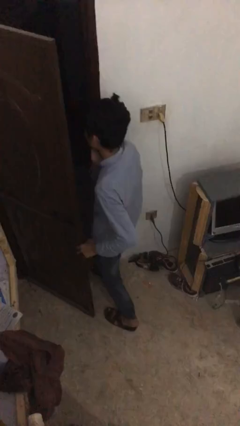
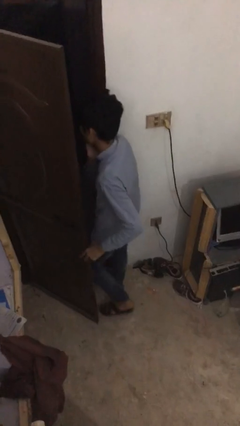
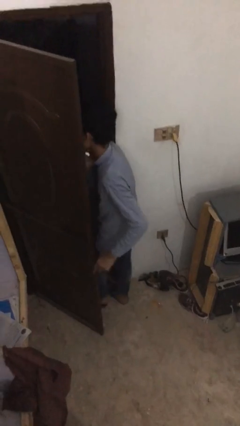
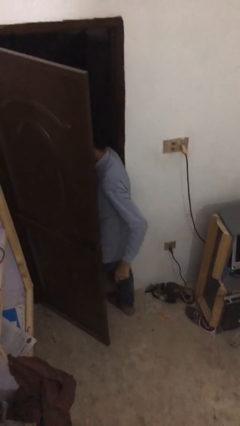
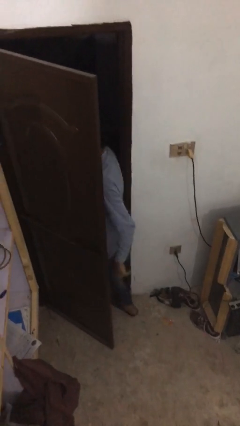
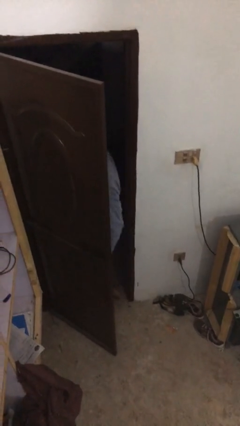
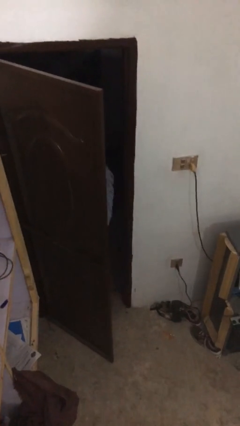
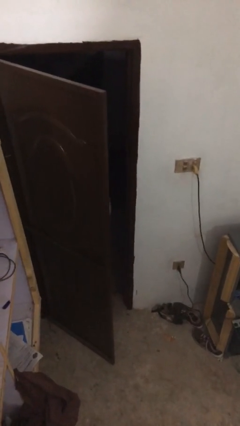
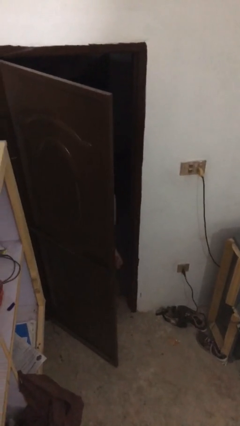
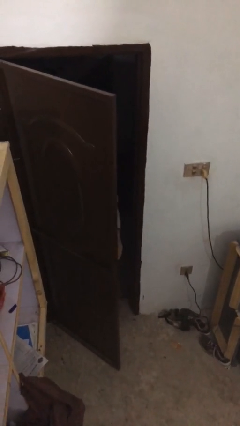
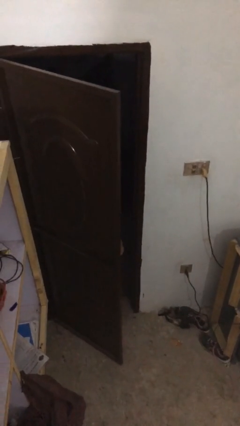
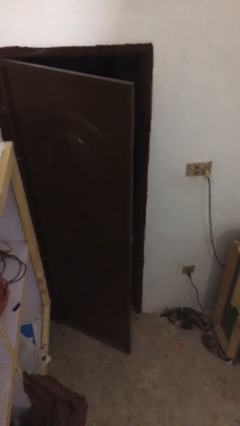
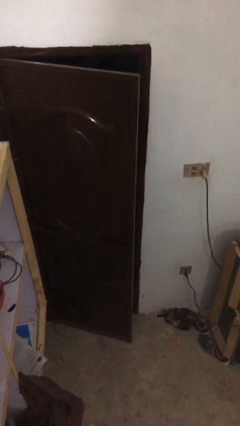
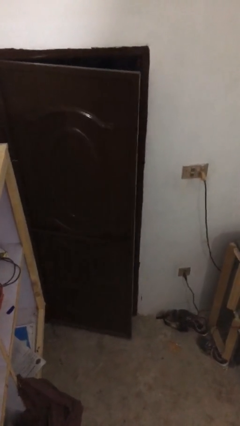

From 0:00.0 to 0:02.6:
person exits scene through structure

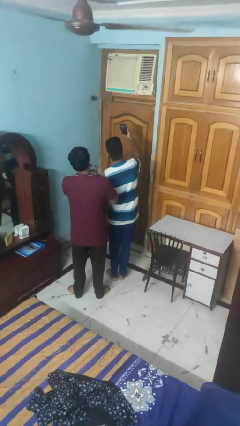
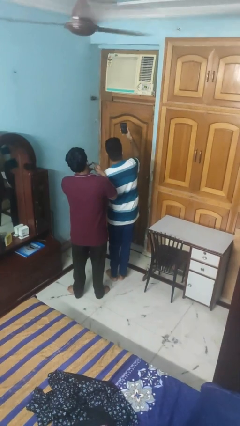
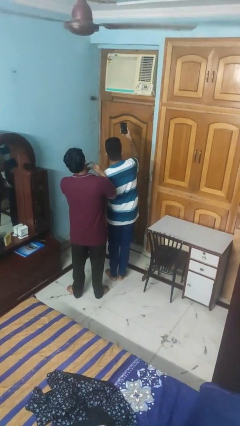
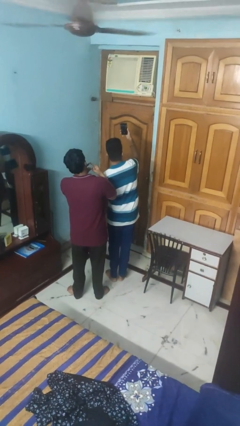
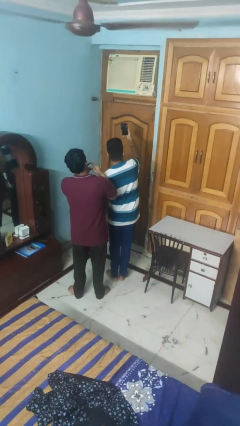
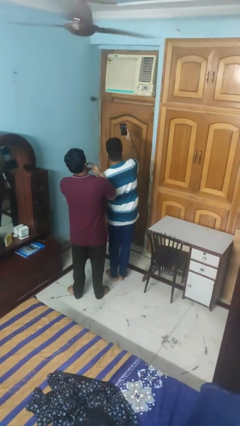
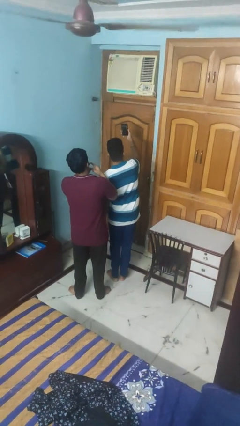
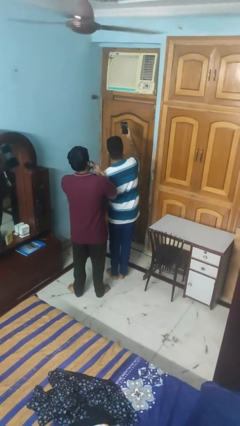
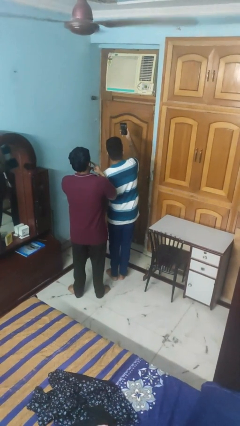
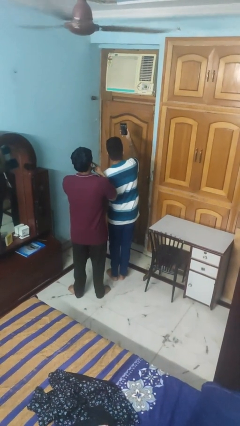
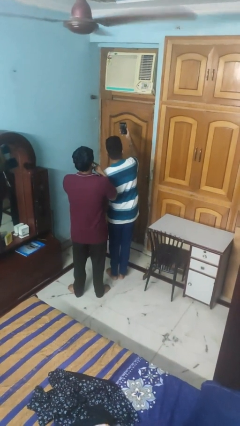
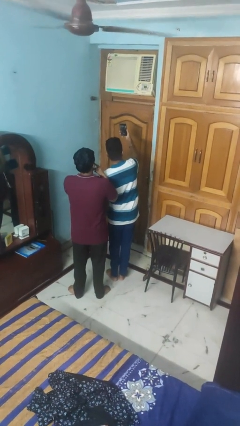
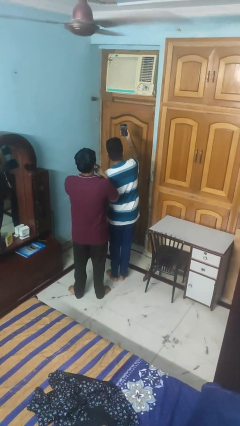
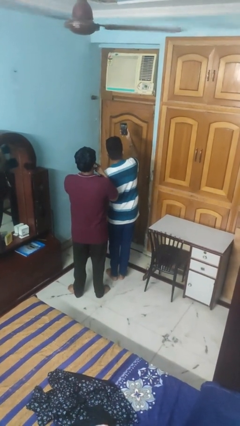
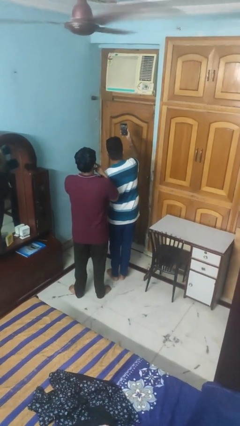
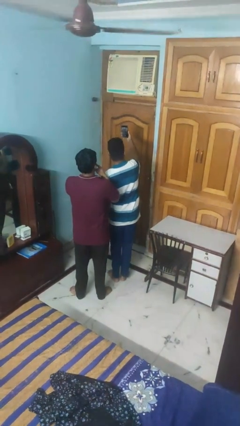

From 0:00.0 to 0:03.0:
person takes selfie with person

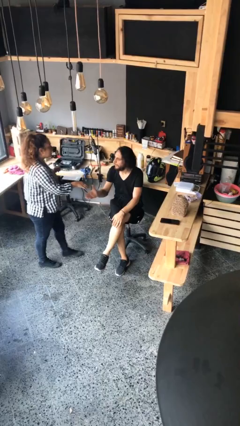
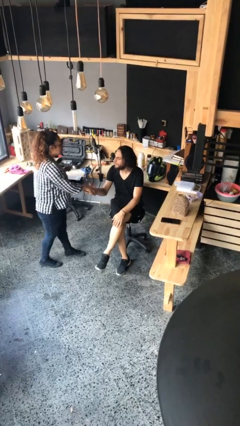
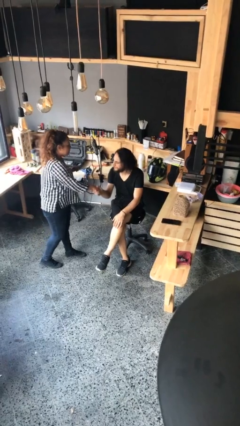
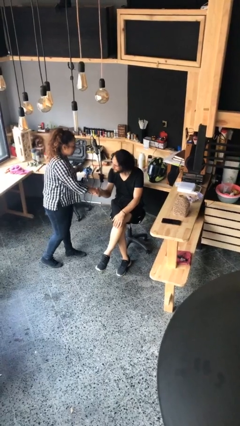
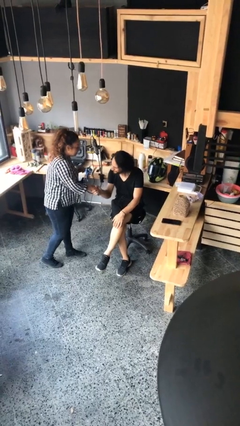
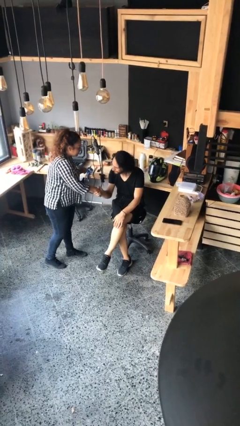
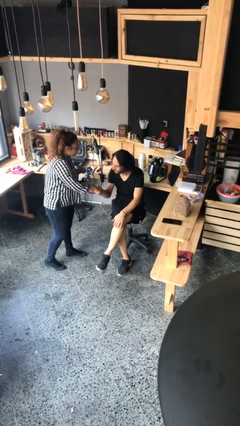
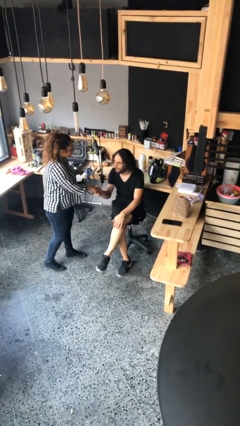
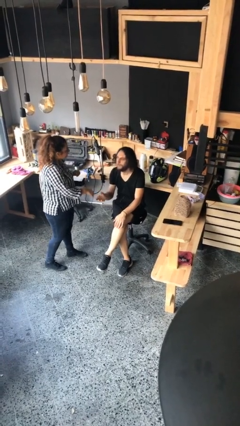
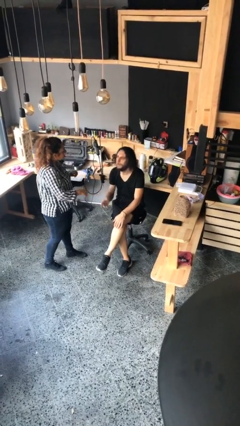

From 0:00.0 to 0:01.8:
person shakes hand

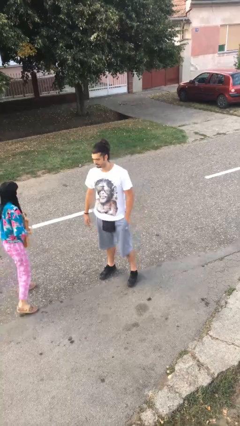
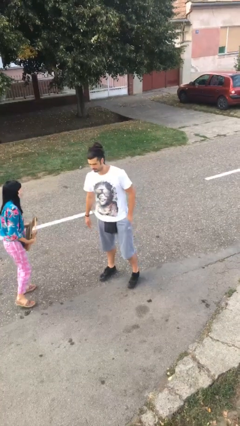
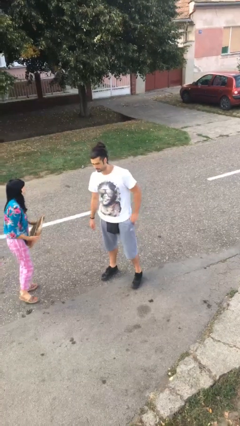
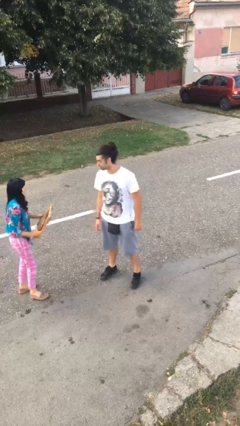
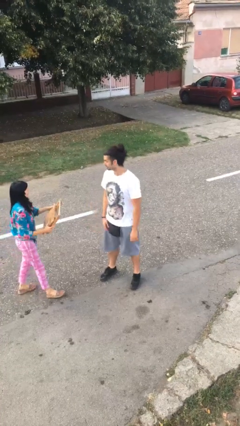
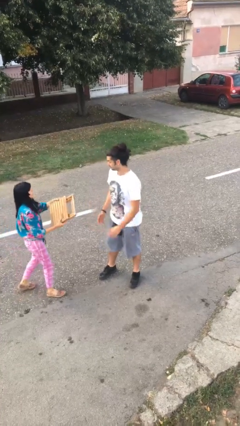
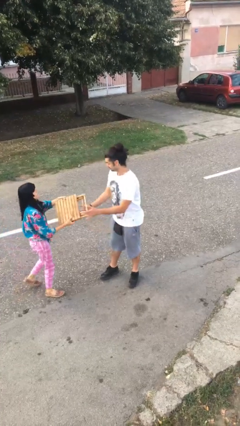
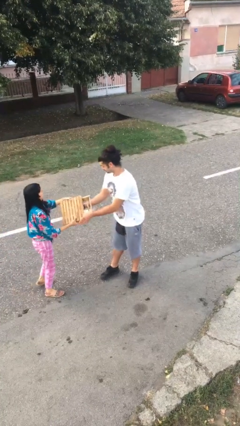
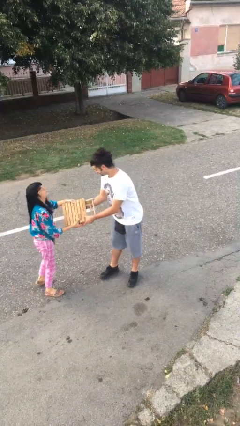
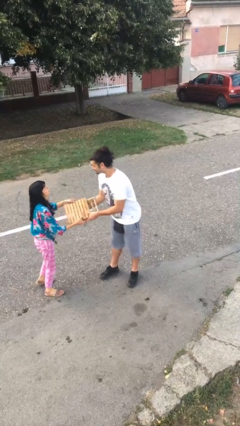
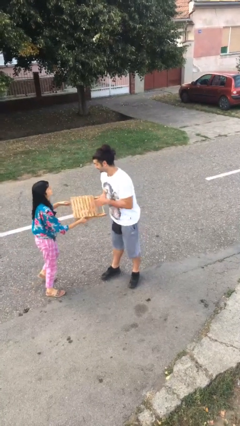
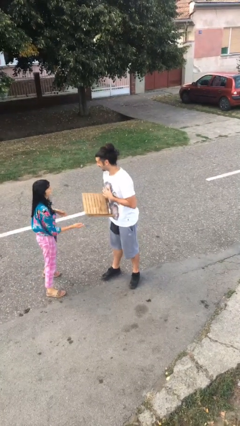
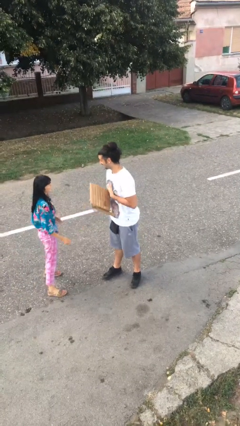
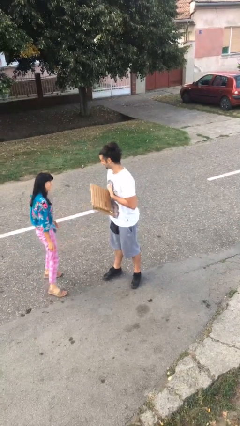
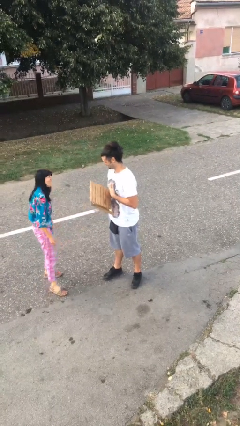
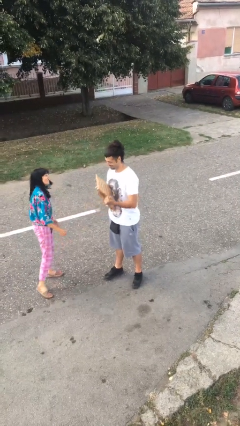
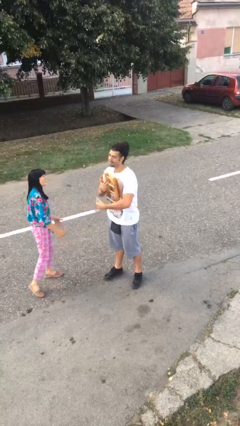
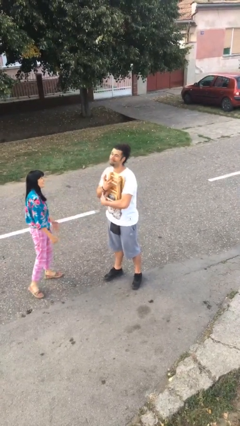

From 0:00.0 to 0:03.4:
person transfers object to person

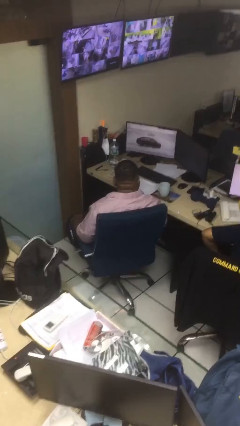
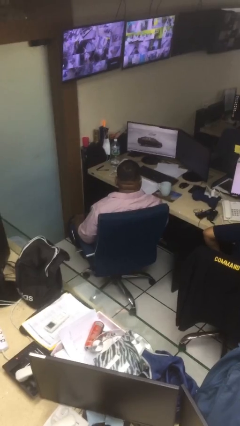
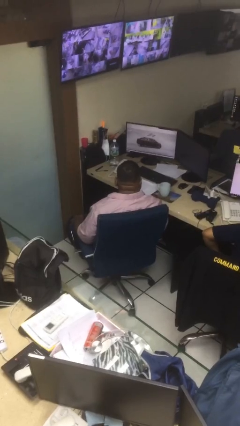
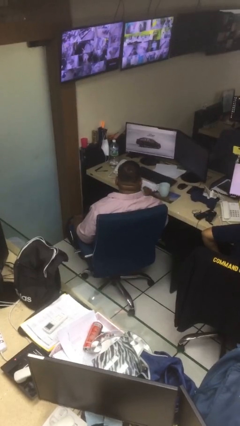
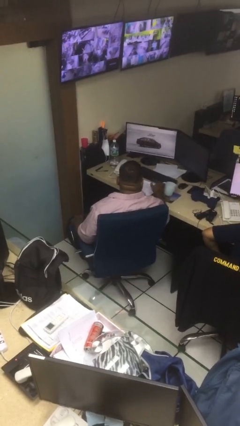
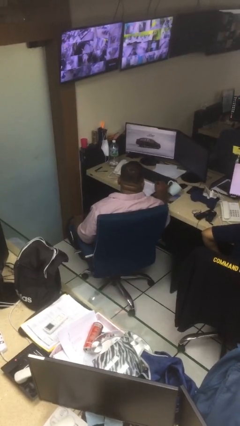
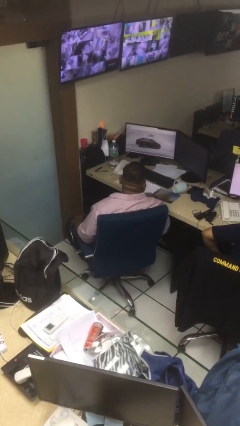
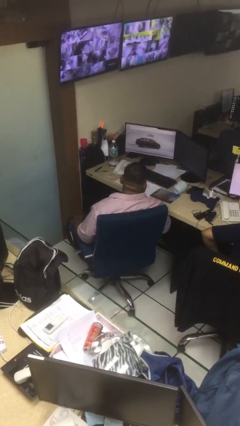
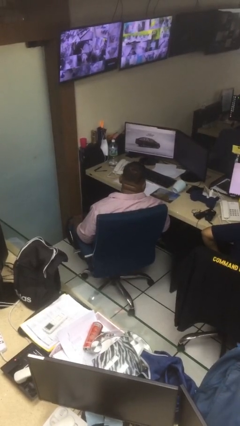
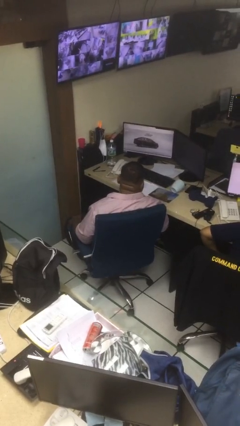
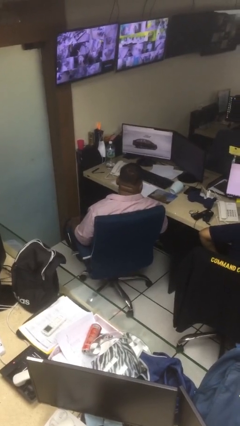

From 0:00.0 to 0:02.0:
person knocks over glass

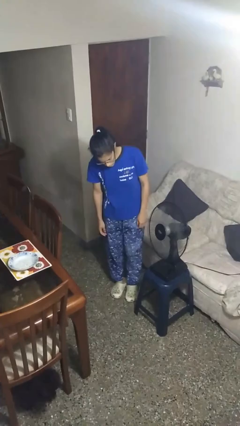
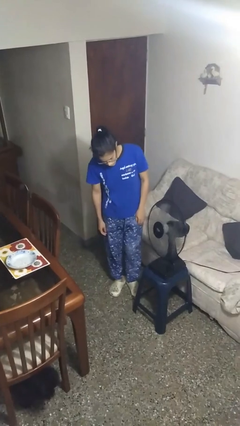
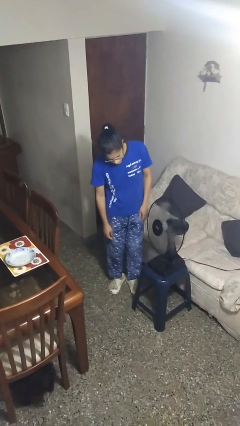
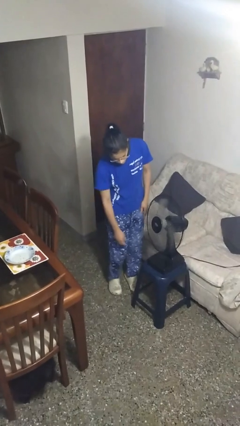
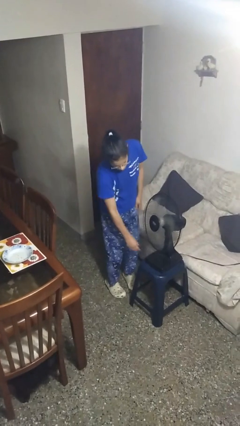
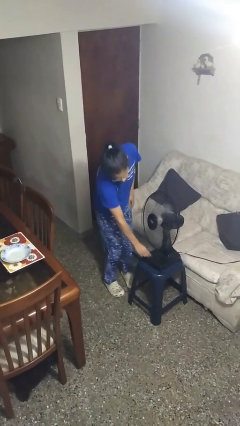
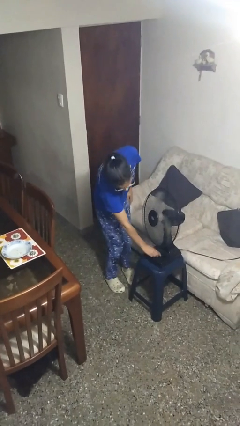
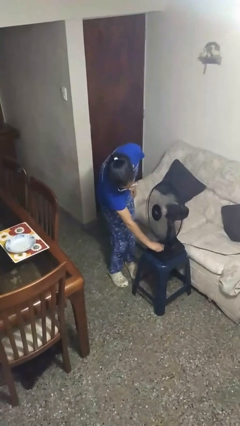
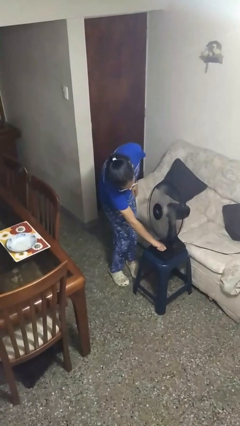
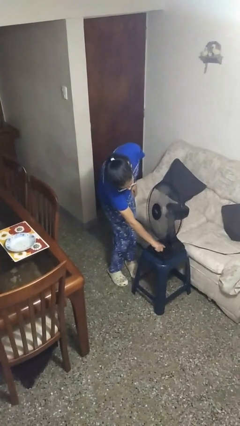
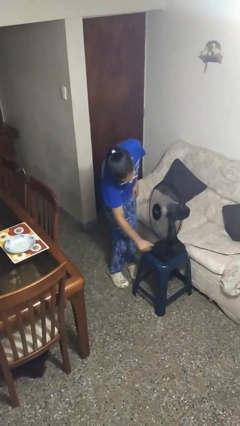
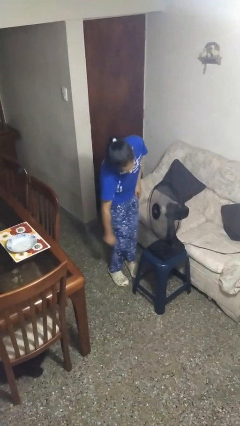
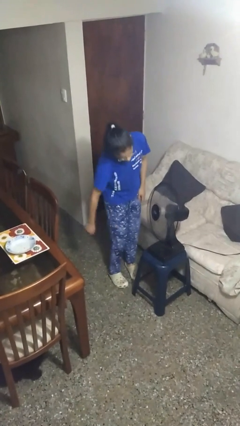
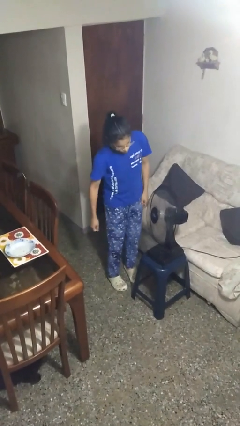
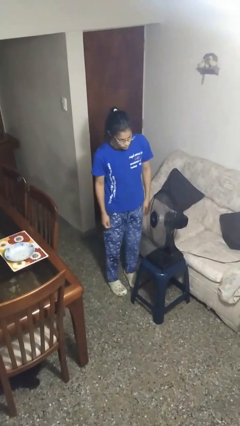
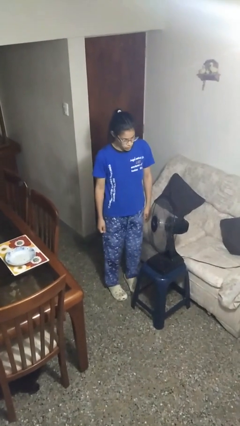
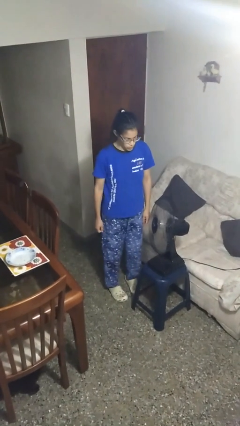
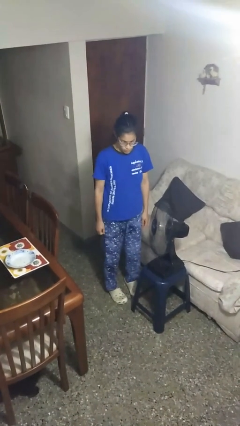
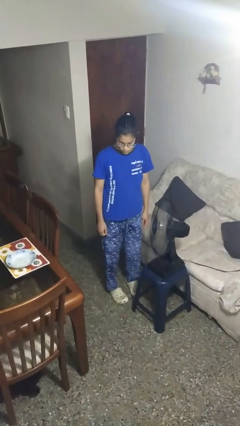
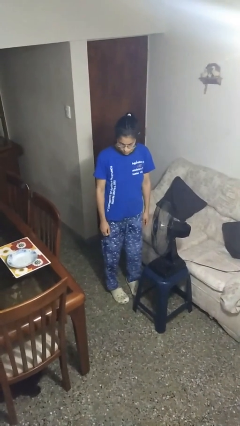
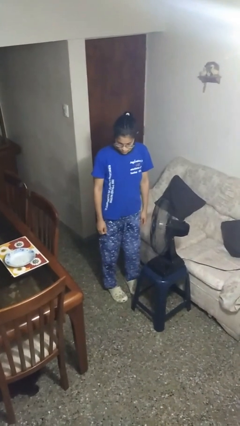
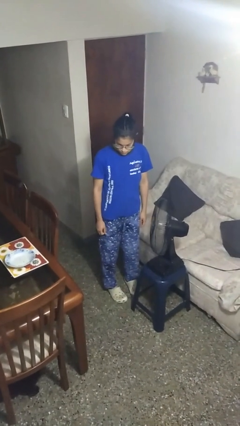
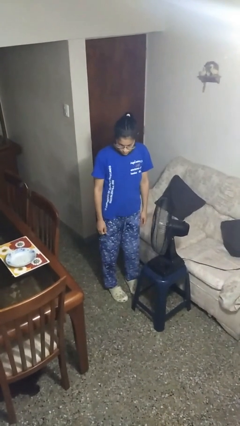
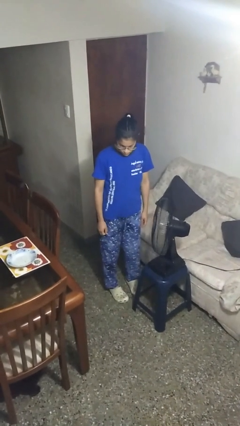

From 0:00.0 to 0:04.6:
person turns on fan
